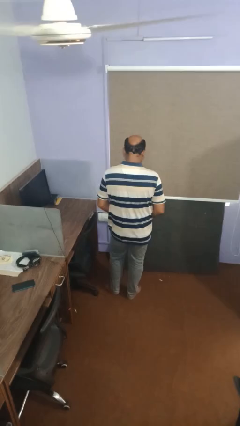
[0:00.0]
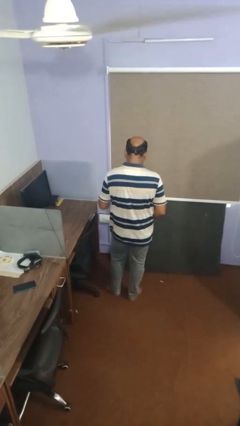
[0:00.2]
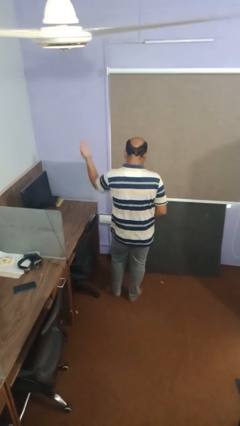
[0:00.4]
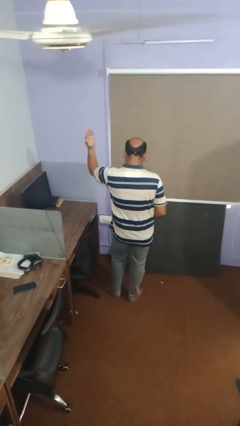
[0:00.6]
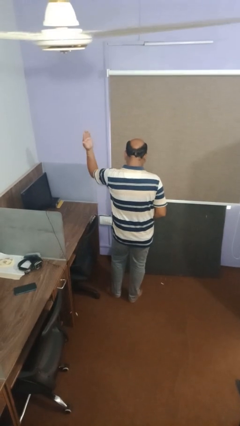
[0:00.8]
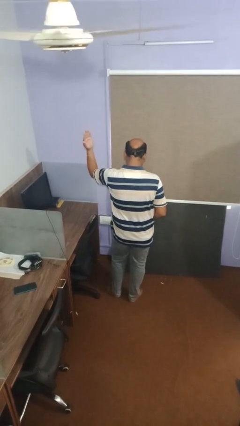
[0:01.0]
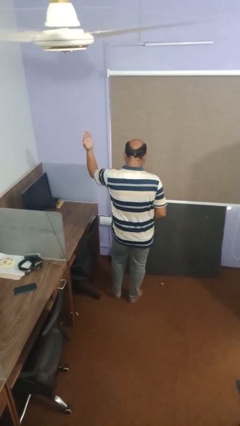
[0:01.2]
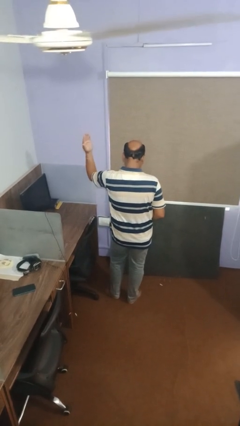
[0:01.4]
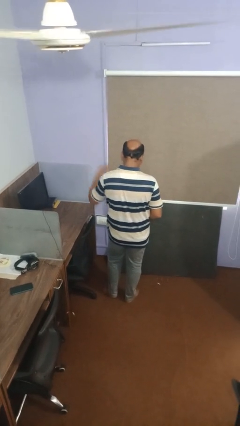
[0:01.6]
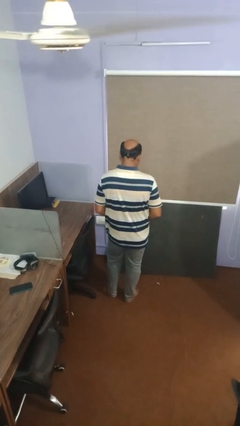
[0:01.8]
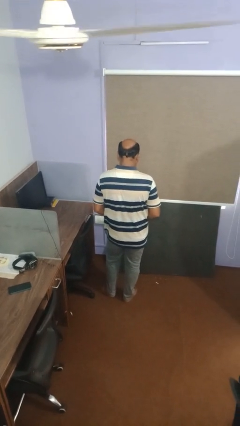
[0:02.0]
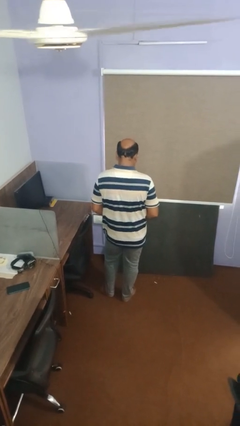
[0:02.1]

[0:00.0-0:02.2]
person gestures swipe left

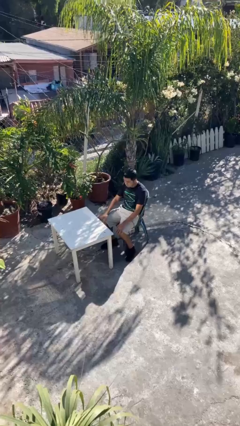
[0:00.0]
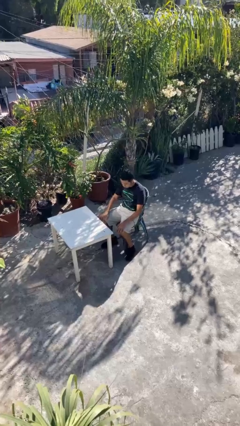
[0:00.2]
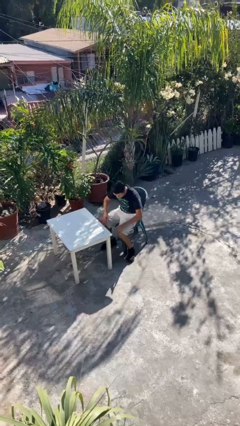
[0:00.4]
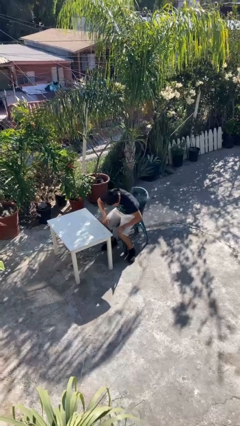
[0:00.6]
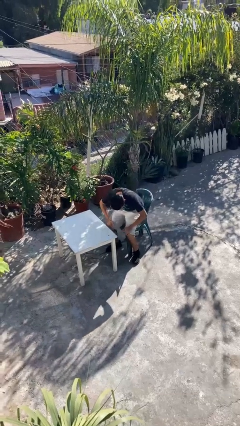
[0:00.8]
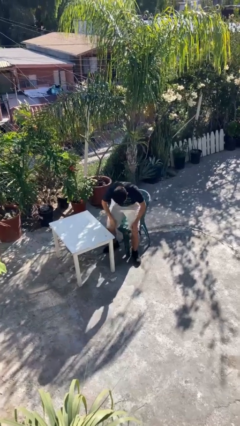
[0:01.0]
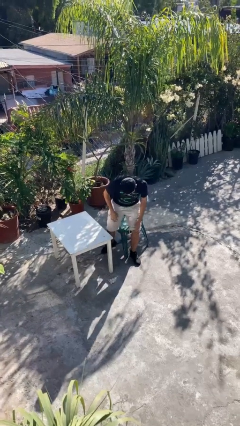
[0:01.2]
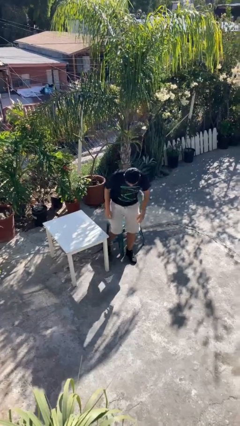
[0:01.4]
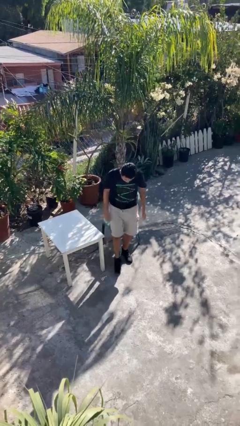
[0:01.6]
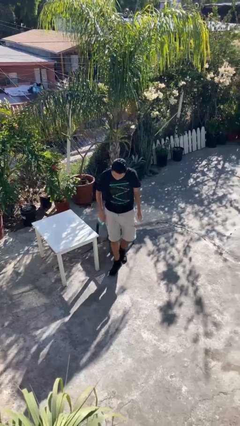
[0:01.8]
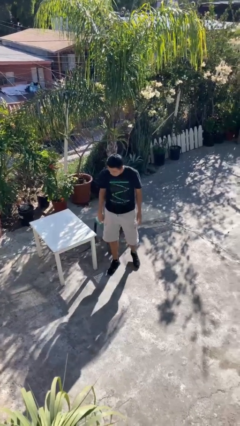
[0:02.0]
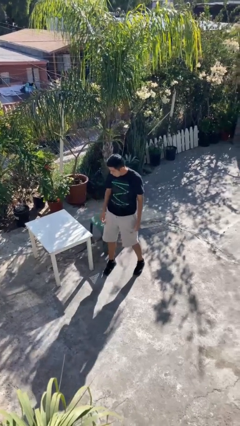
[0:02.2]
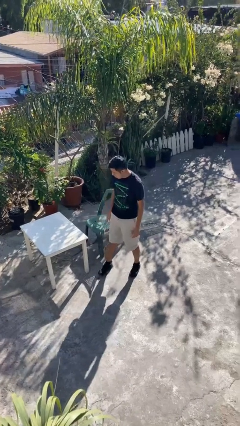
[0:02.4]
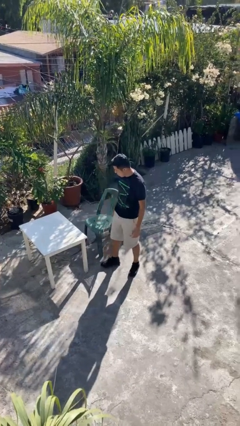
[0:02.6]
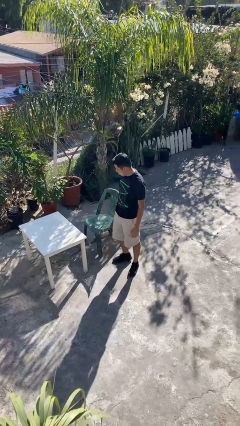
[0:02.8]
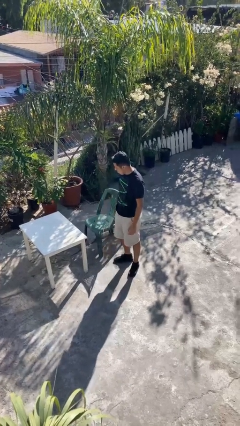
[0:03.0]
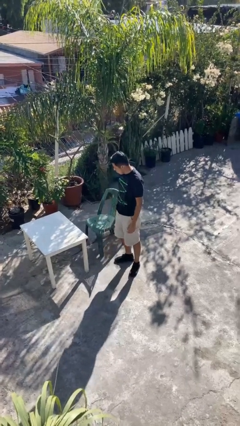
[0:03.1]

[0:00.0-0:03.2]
person stands up

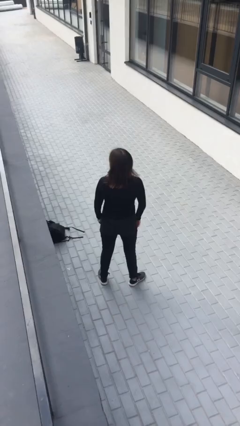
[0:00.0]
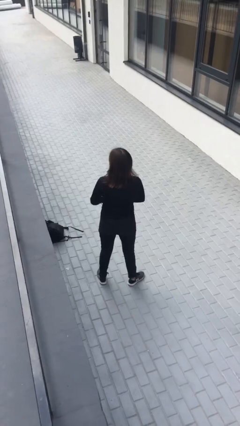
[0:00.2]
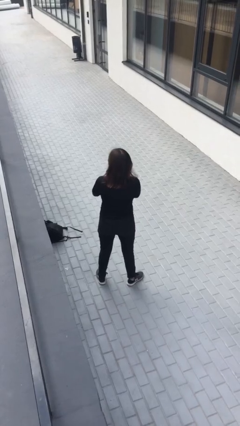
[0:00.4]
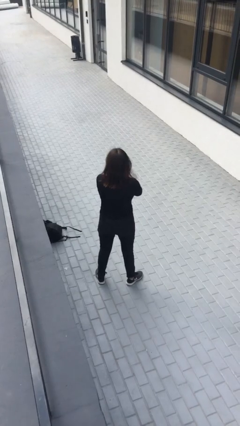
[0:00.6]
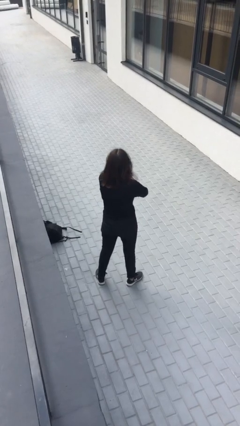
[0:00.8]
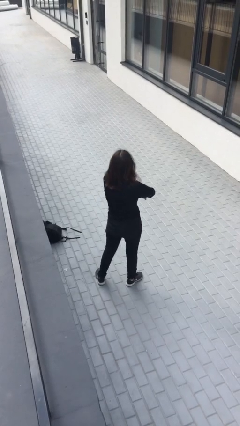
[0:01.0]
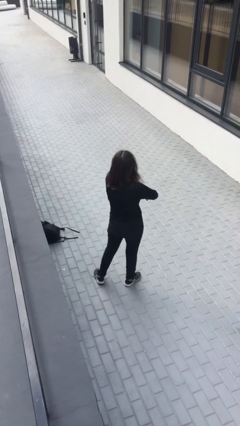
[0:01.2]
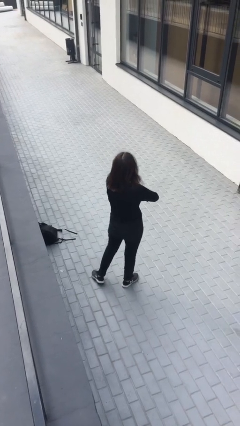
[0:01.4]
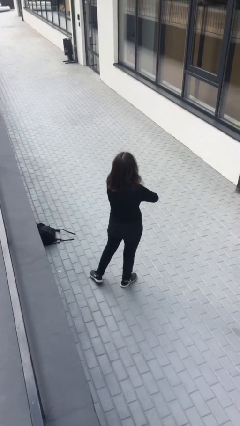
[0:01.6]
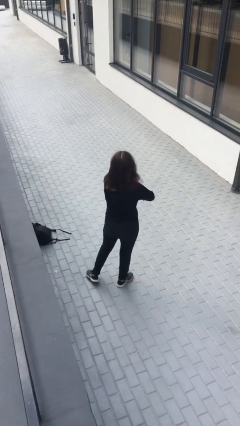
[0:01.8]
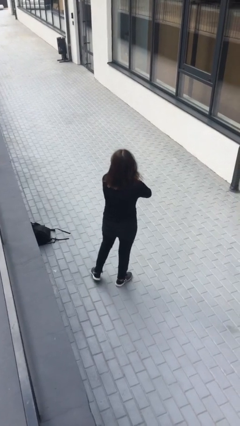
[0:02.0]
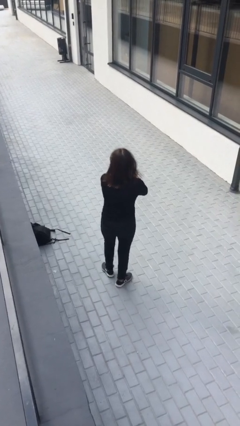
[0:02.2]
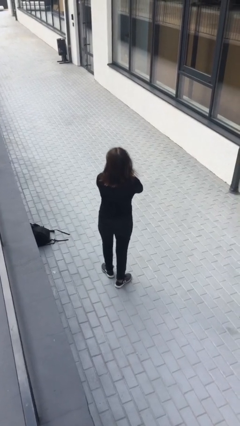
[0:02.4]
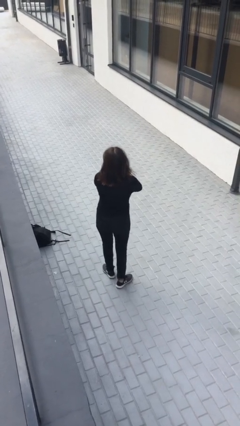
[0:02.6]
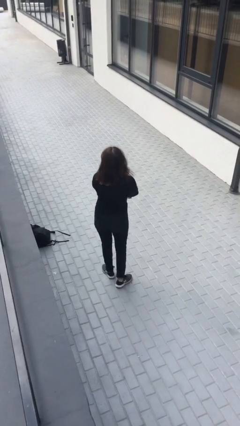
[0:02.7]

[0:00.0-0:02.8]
person crosses arms

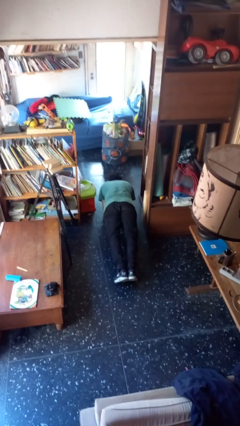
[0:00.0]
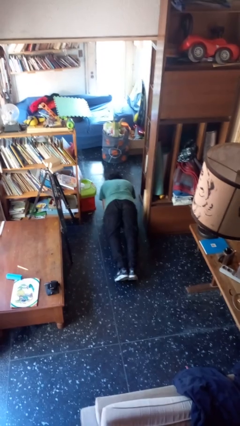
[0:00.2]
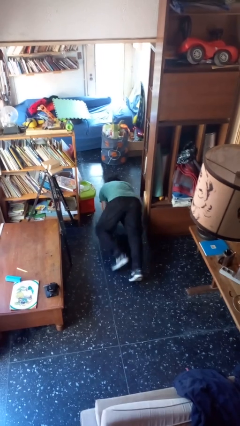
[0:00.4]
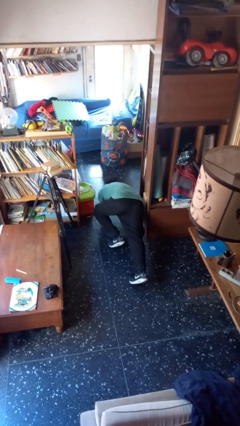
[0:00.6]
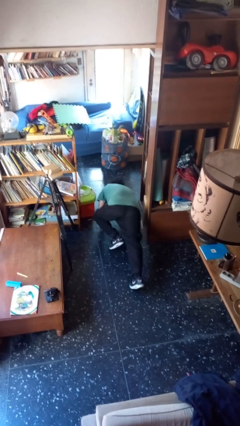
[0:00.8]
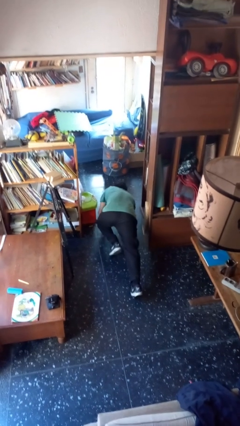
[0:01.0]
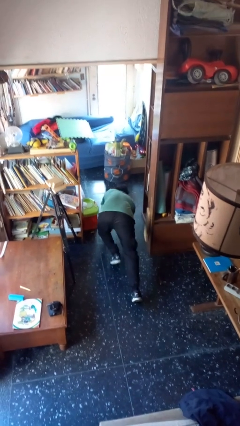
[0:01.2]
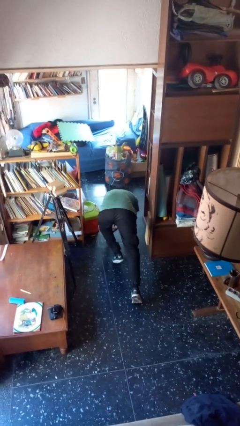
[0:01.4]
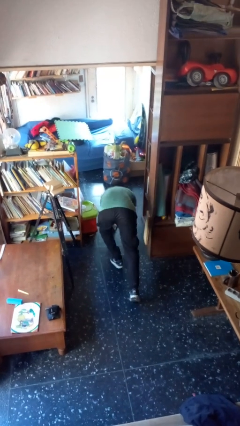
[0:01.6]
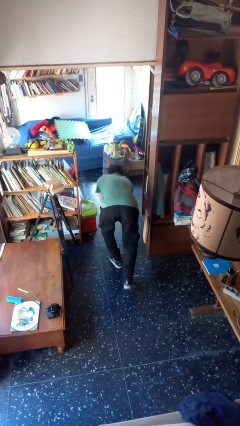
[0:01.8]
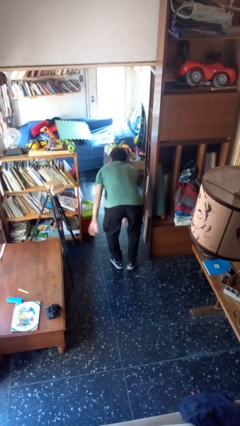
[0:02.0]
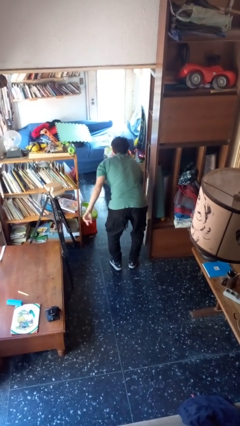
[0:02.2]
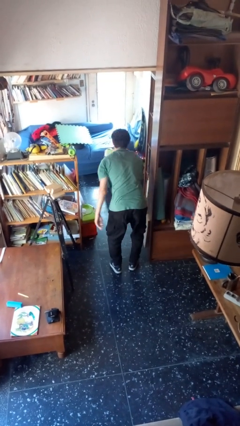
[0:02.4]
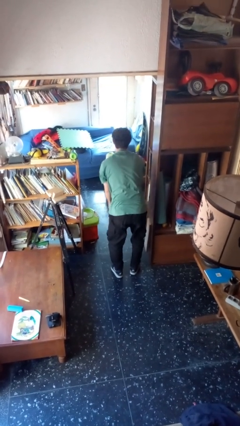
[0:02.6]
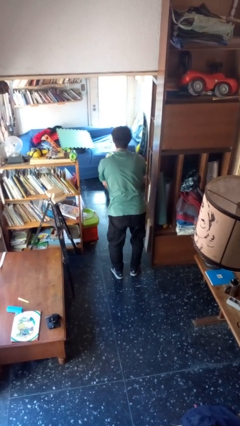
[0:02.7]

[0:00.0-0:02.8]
person stands up from floor

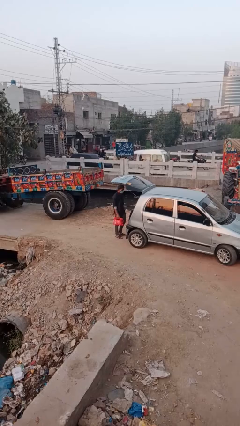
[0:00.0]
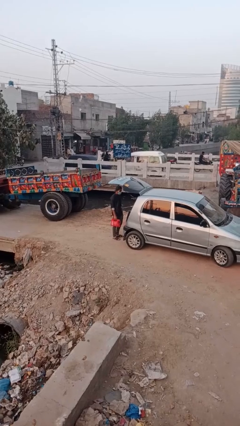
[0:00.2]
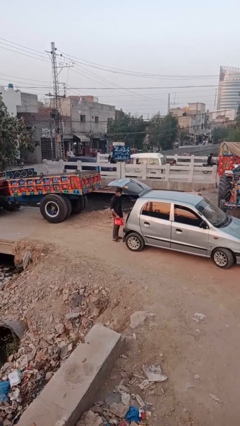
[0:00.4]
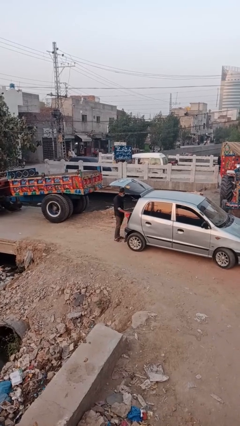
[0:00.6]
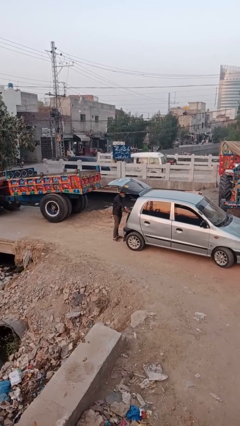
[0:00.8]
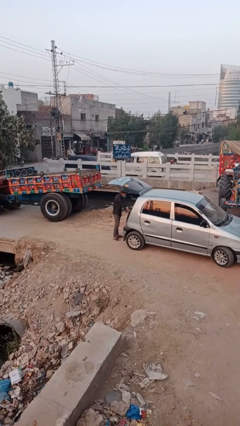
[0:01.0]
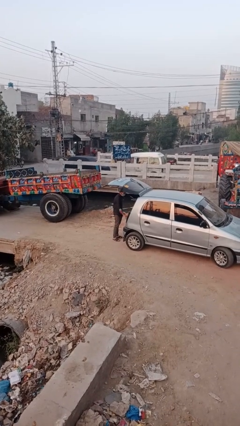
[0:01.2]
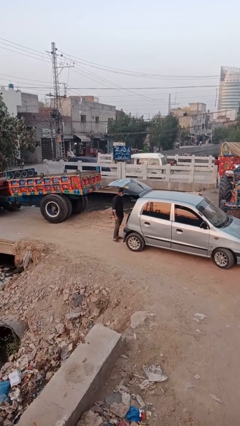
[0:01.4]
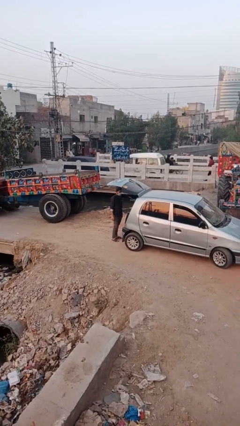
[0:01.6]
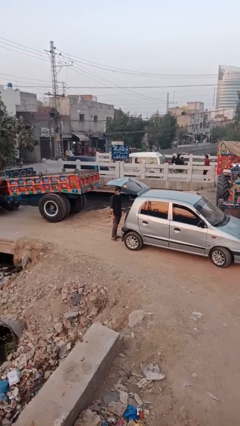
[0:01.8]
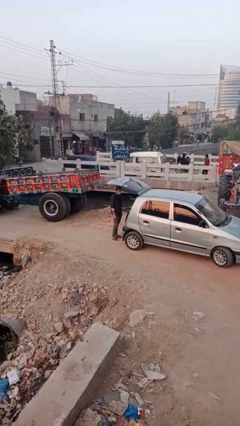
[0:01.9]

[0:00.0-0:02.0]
person loads car

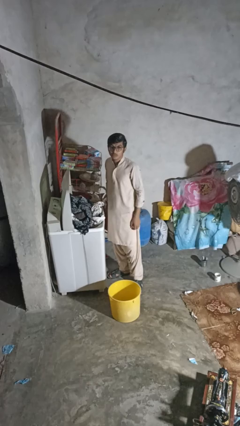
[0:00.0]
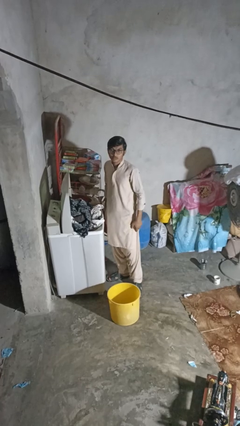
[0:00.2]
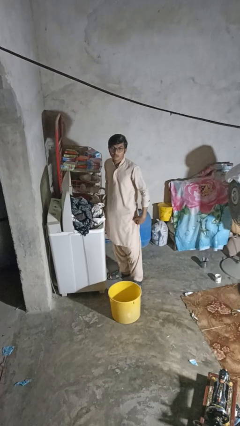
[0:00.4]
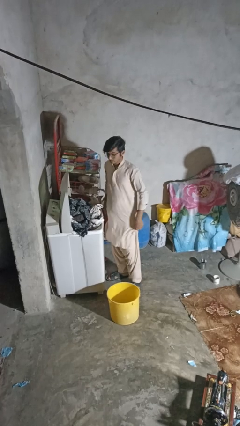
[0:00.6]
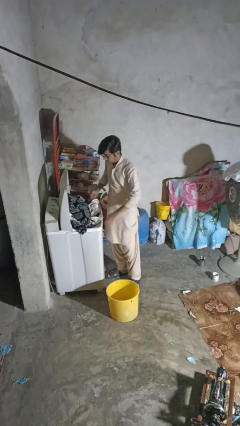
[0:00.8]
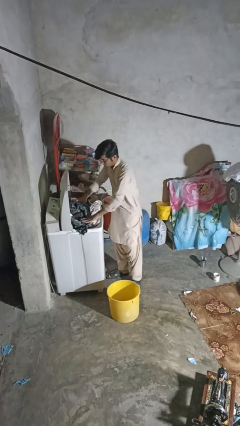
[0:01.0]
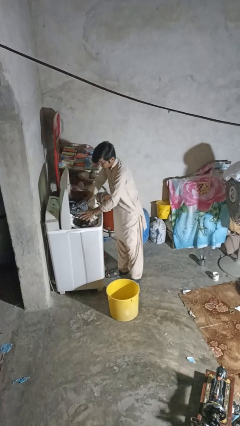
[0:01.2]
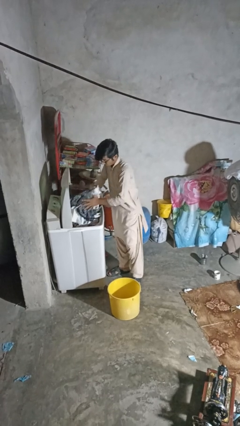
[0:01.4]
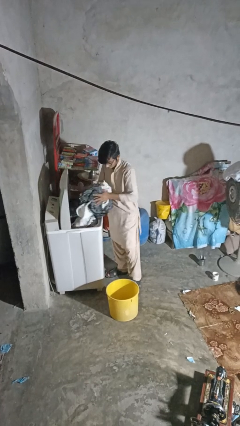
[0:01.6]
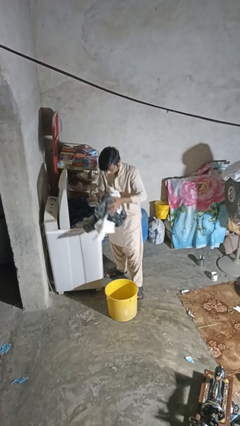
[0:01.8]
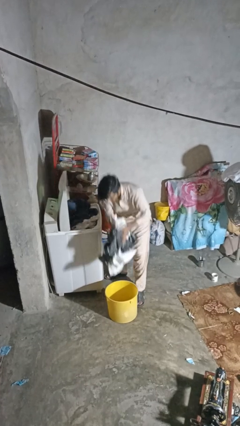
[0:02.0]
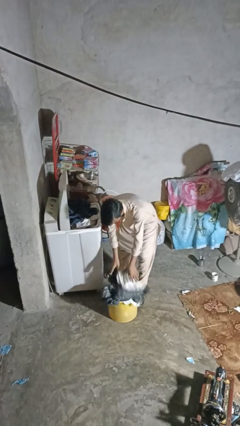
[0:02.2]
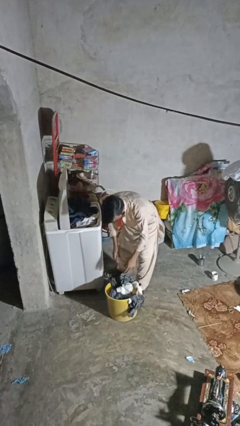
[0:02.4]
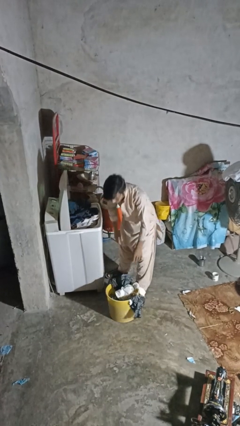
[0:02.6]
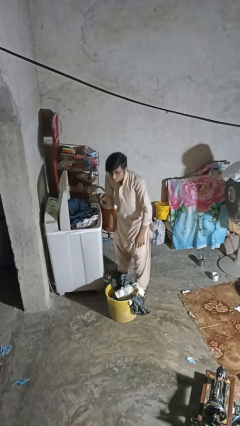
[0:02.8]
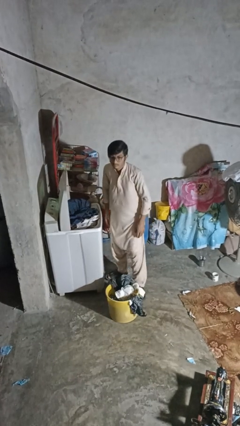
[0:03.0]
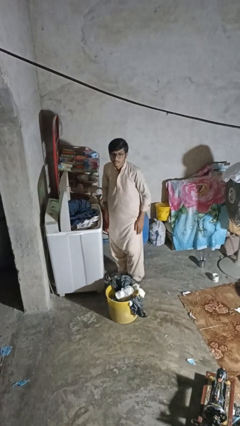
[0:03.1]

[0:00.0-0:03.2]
person unloads clotheswasher

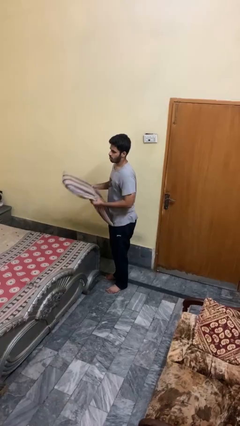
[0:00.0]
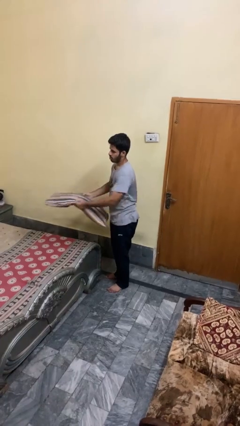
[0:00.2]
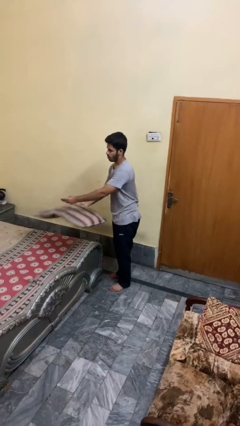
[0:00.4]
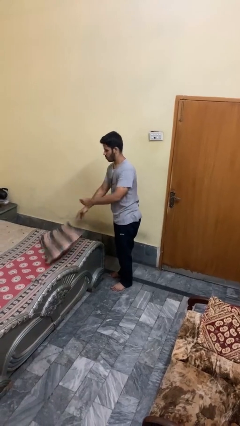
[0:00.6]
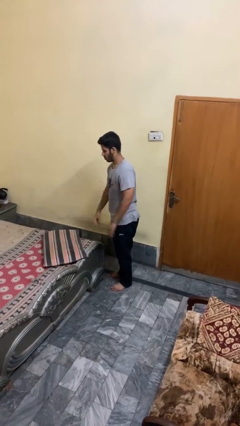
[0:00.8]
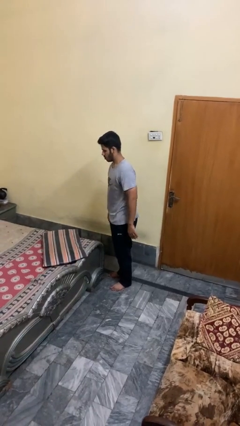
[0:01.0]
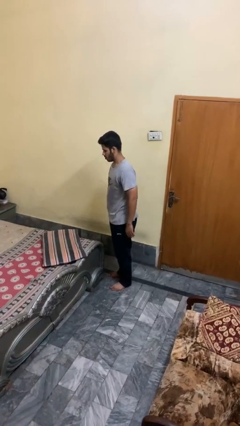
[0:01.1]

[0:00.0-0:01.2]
person puts down object on bed
